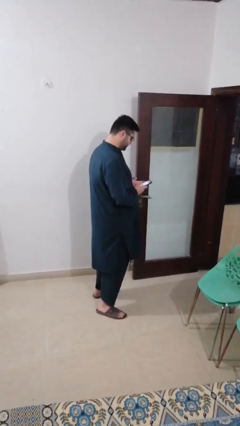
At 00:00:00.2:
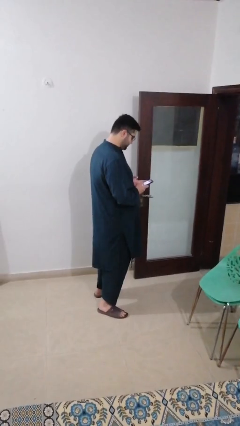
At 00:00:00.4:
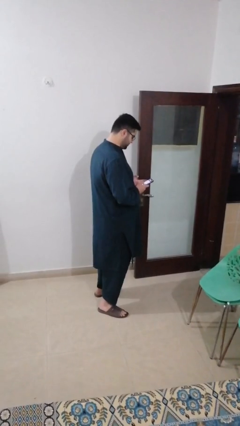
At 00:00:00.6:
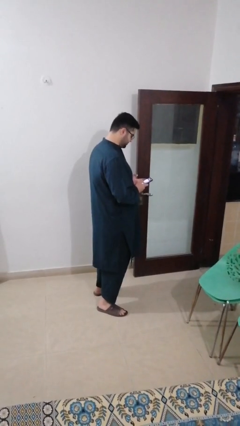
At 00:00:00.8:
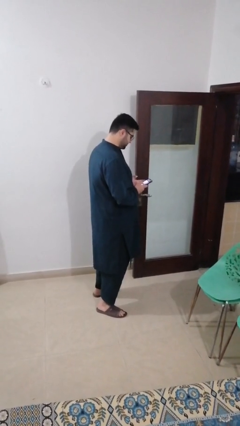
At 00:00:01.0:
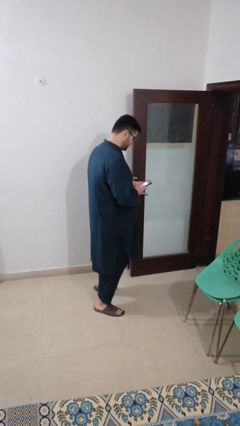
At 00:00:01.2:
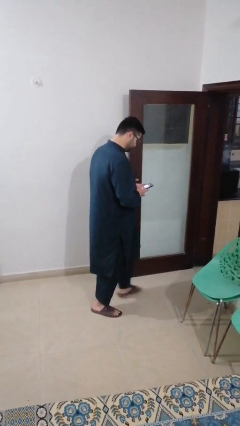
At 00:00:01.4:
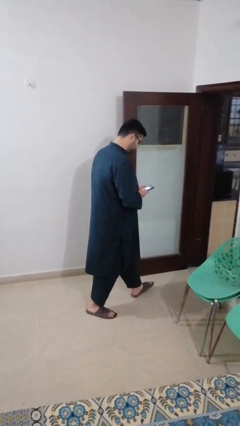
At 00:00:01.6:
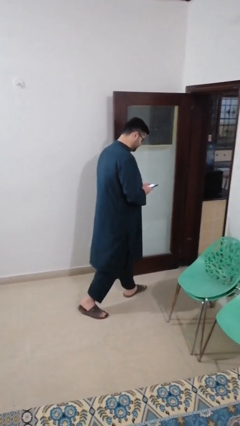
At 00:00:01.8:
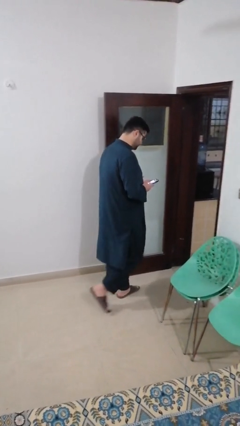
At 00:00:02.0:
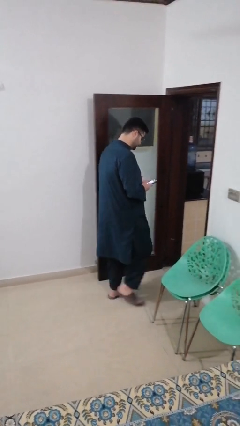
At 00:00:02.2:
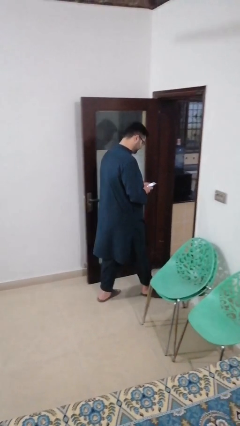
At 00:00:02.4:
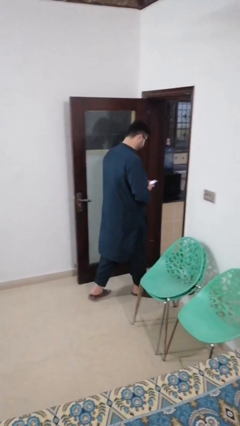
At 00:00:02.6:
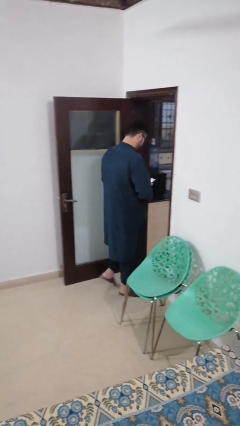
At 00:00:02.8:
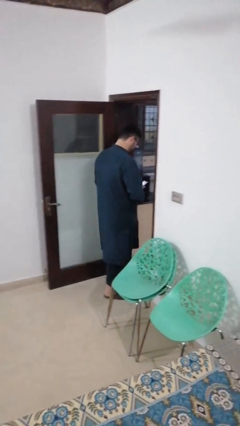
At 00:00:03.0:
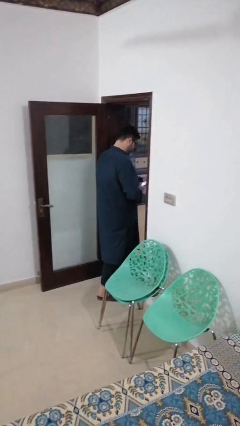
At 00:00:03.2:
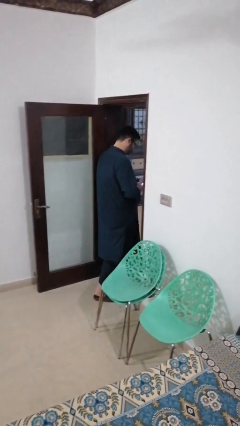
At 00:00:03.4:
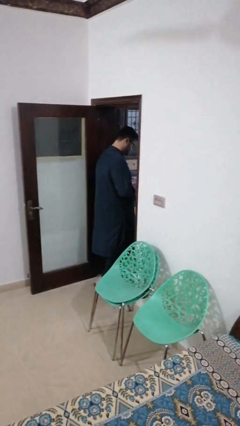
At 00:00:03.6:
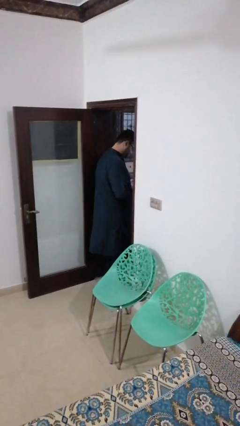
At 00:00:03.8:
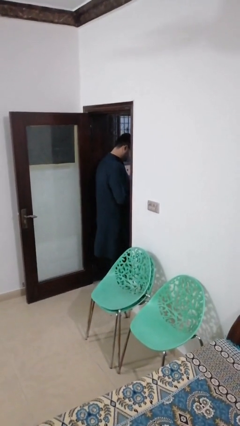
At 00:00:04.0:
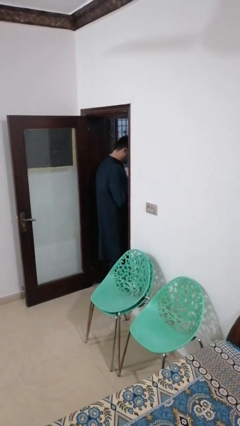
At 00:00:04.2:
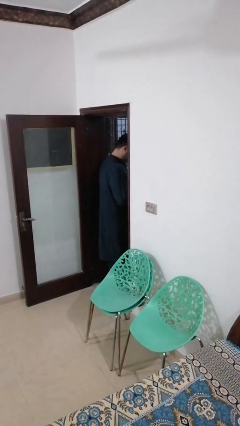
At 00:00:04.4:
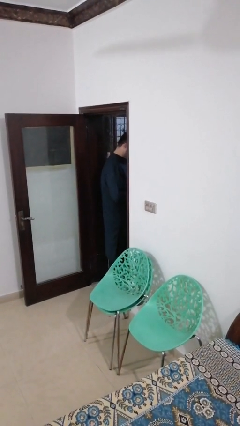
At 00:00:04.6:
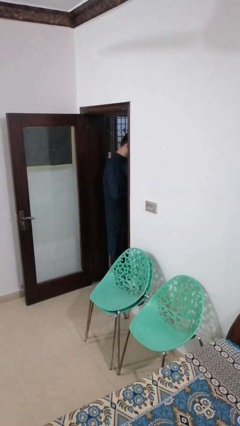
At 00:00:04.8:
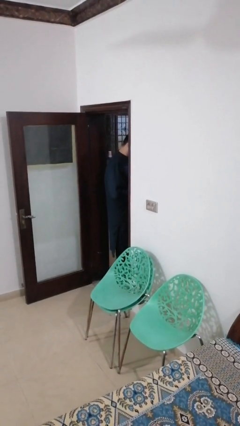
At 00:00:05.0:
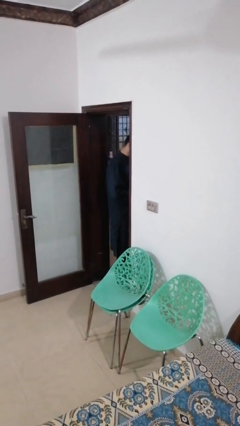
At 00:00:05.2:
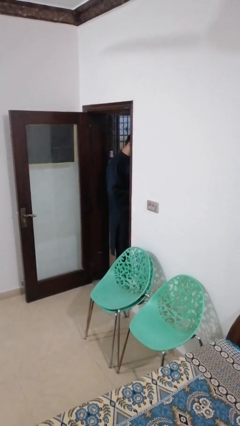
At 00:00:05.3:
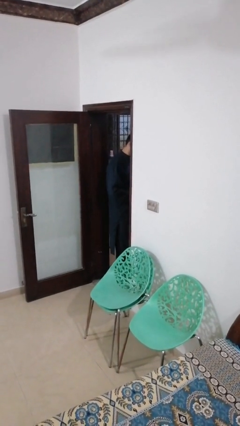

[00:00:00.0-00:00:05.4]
person enters scene through structure

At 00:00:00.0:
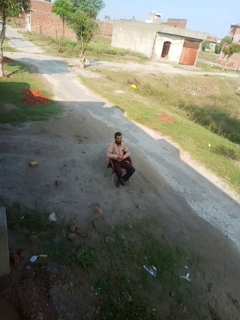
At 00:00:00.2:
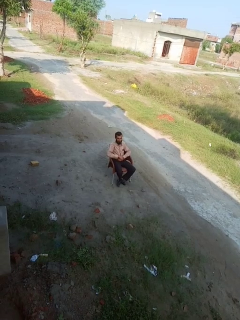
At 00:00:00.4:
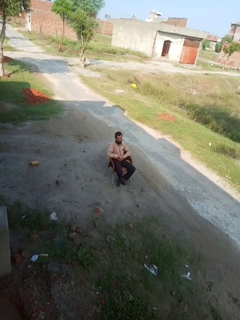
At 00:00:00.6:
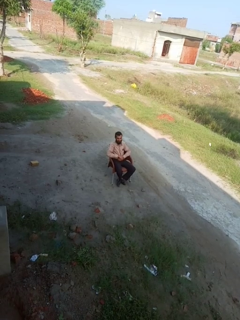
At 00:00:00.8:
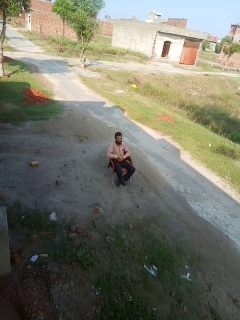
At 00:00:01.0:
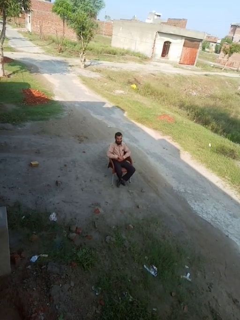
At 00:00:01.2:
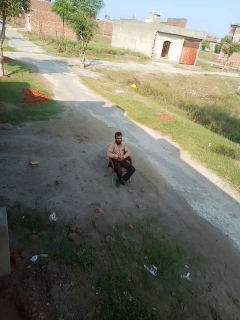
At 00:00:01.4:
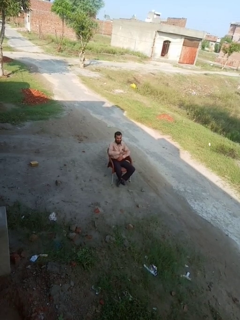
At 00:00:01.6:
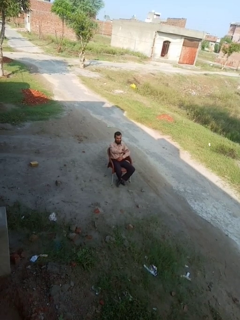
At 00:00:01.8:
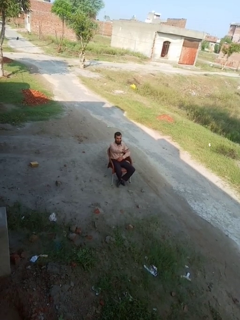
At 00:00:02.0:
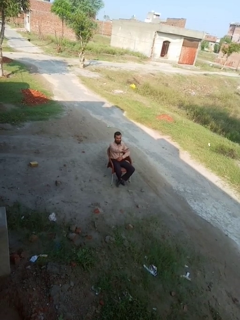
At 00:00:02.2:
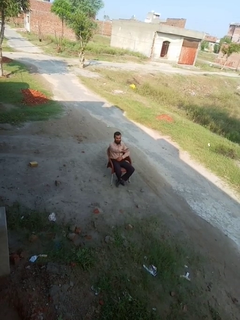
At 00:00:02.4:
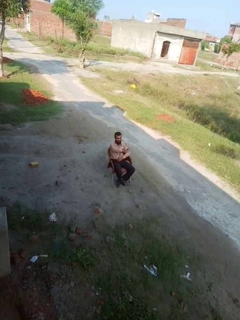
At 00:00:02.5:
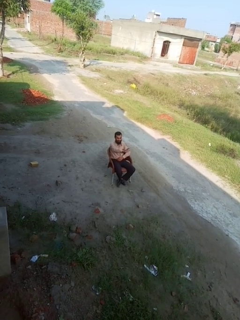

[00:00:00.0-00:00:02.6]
person gestures stop

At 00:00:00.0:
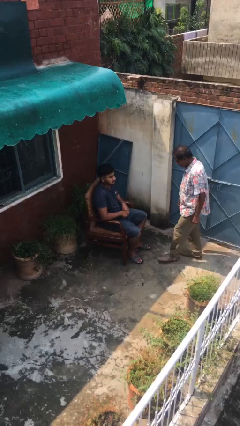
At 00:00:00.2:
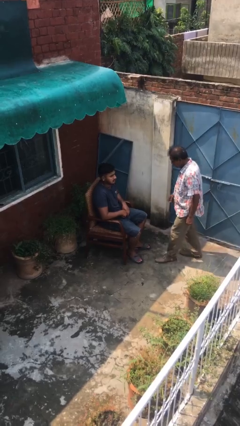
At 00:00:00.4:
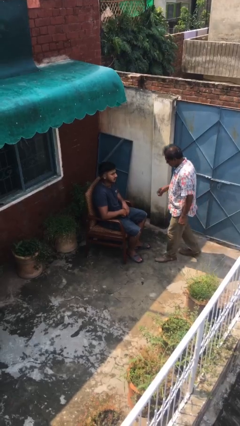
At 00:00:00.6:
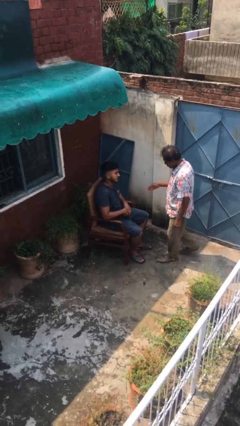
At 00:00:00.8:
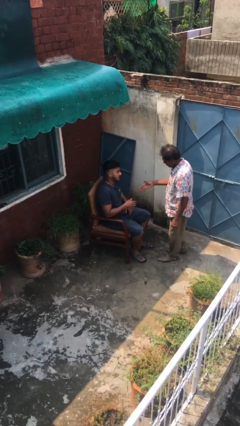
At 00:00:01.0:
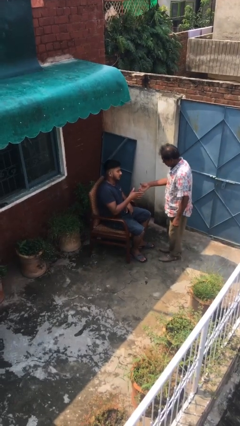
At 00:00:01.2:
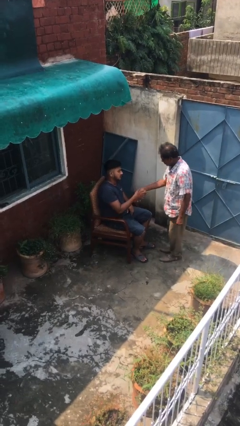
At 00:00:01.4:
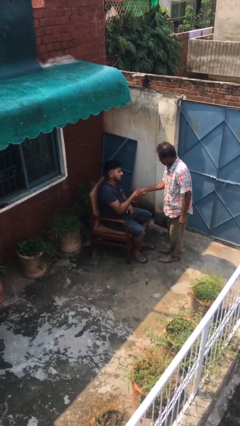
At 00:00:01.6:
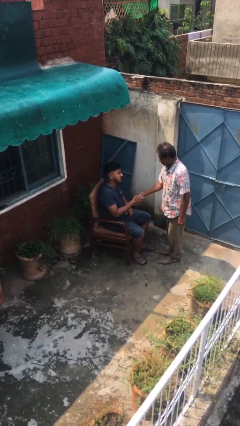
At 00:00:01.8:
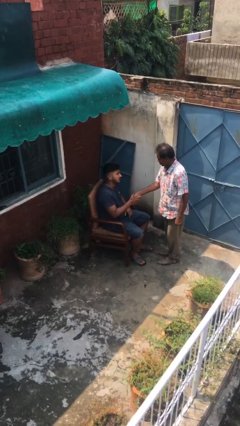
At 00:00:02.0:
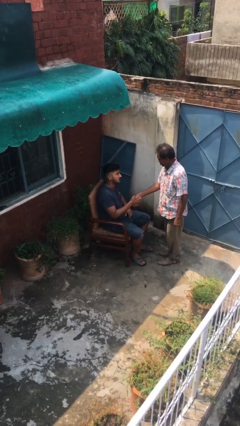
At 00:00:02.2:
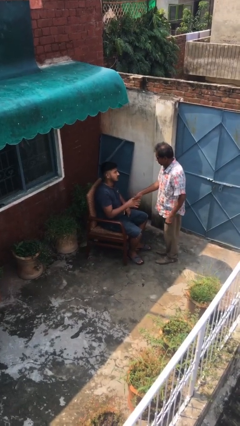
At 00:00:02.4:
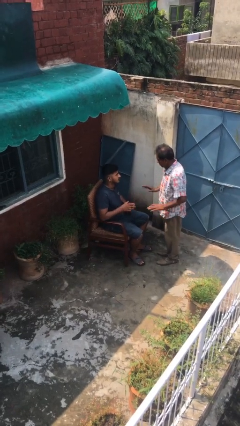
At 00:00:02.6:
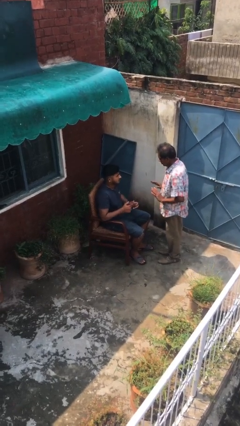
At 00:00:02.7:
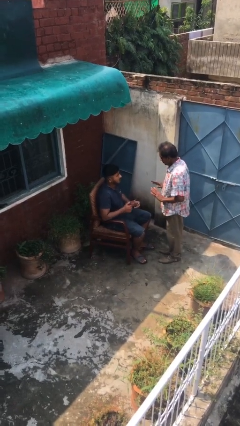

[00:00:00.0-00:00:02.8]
person shakes hand

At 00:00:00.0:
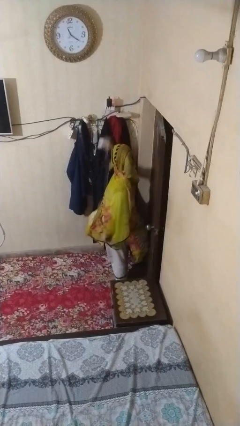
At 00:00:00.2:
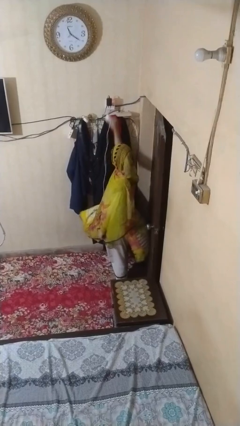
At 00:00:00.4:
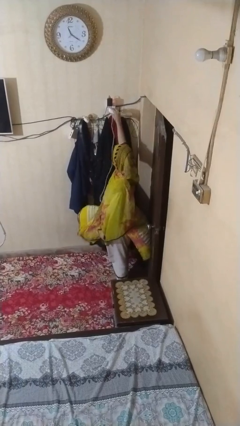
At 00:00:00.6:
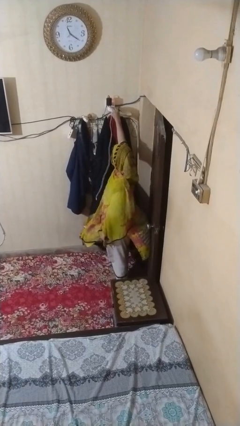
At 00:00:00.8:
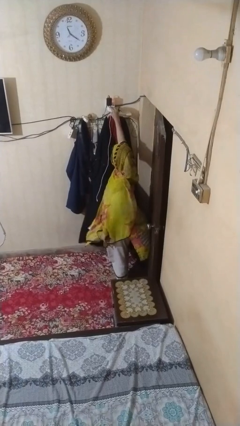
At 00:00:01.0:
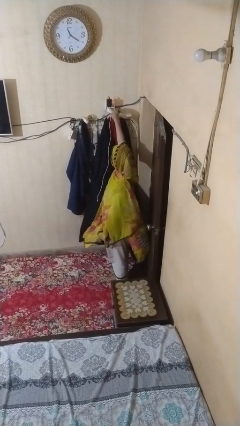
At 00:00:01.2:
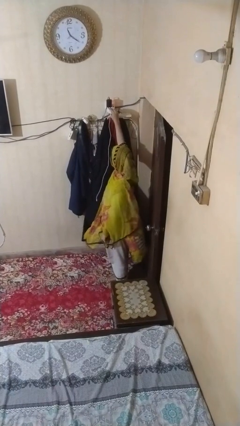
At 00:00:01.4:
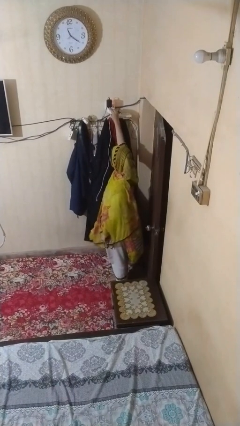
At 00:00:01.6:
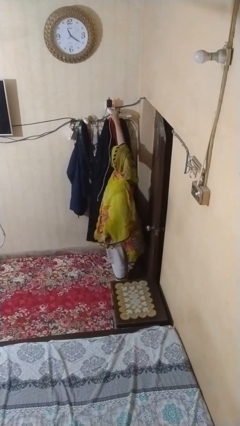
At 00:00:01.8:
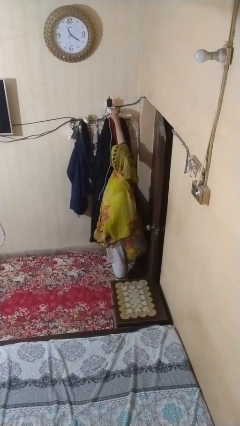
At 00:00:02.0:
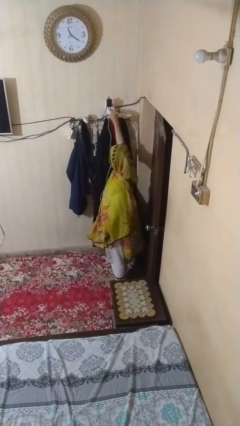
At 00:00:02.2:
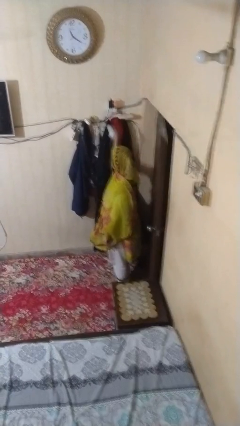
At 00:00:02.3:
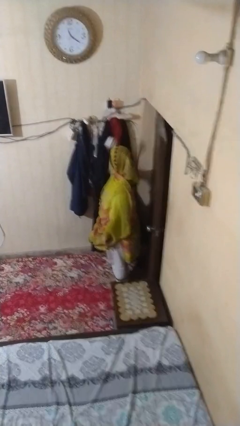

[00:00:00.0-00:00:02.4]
person plugs into electrical socket

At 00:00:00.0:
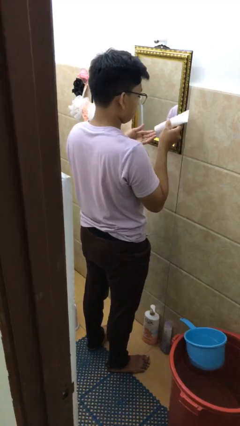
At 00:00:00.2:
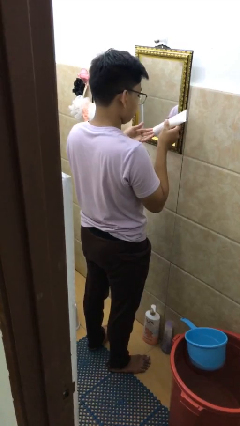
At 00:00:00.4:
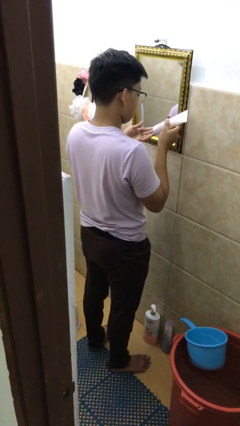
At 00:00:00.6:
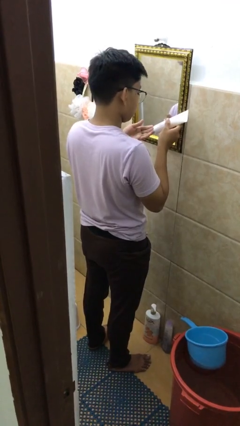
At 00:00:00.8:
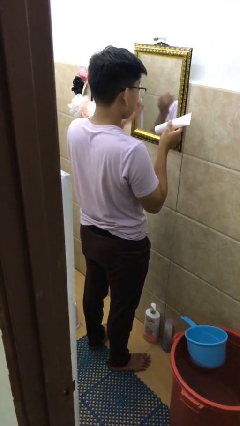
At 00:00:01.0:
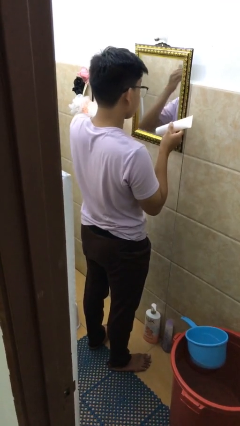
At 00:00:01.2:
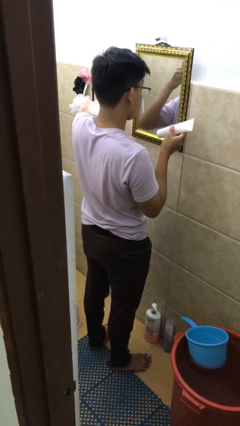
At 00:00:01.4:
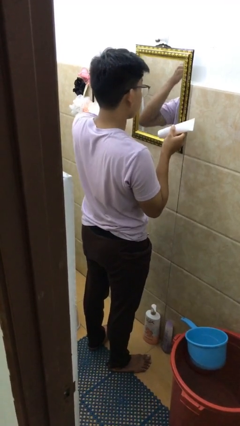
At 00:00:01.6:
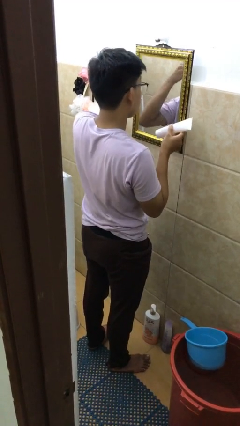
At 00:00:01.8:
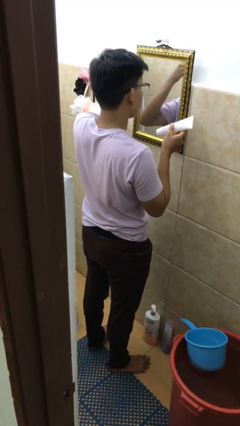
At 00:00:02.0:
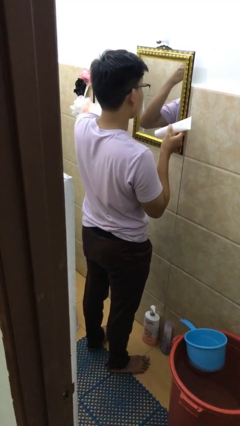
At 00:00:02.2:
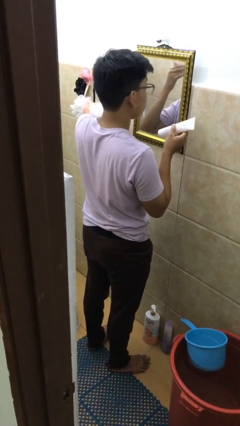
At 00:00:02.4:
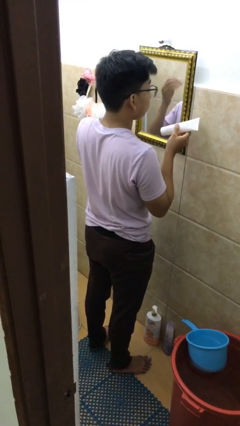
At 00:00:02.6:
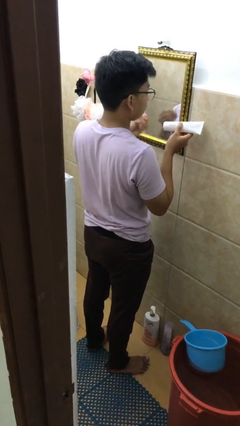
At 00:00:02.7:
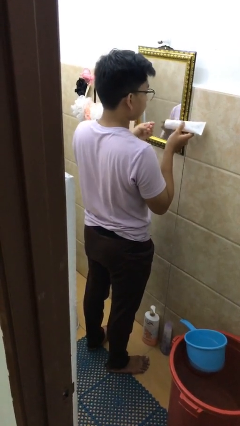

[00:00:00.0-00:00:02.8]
person applies facial moisturizer

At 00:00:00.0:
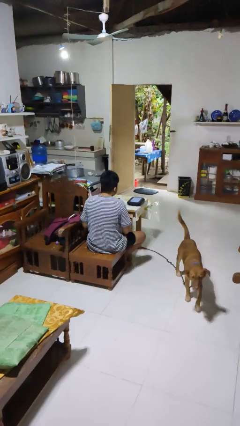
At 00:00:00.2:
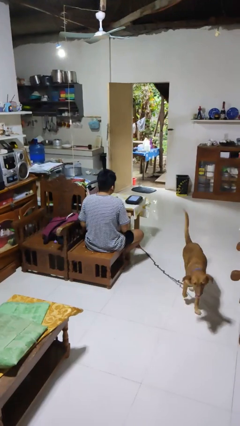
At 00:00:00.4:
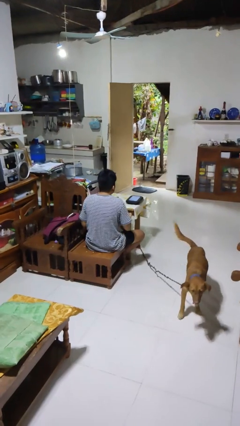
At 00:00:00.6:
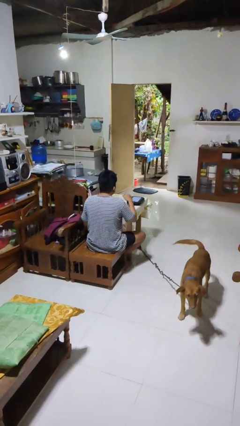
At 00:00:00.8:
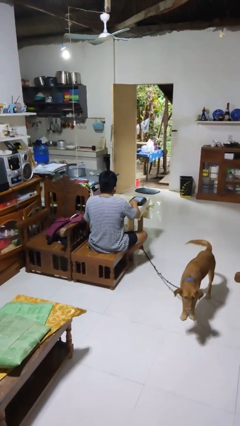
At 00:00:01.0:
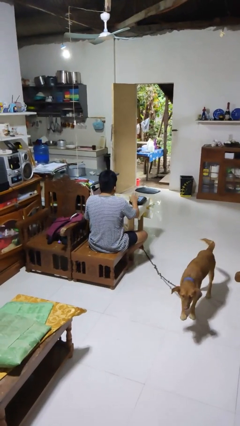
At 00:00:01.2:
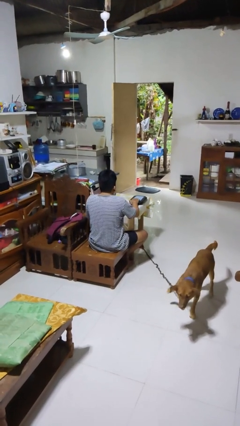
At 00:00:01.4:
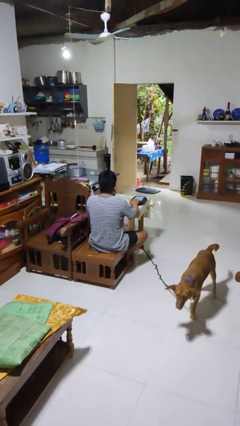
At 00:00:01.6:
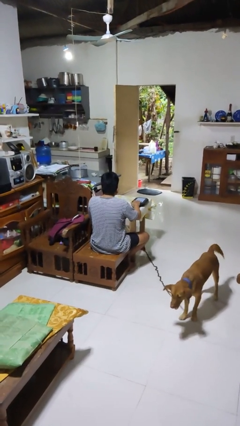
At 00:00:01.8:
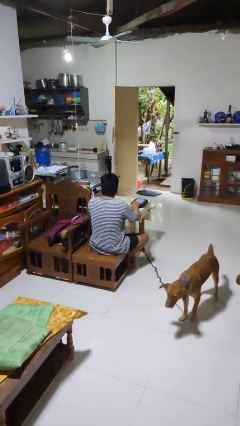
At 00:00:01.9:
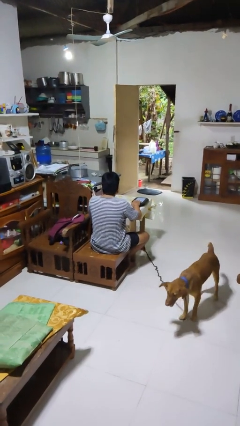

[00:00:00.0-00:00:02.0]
person taps object with finger
